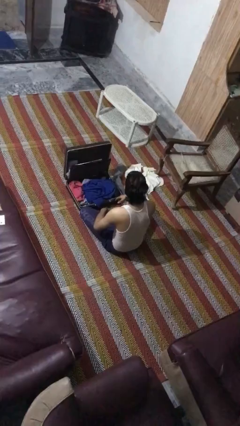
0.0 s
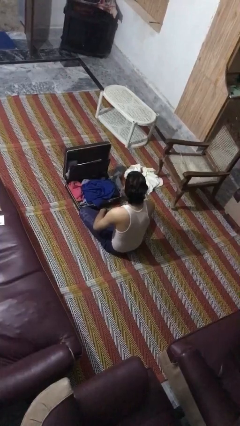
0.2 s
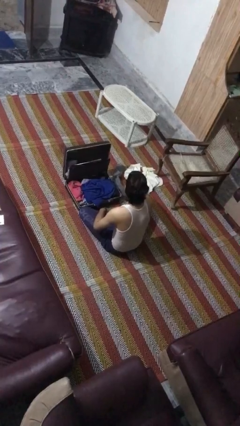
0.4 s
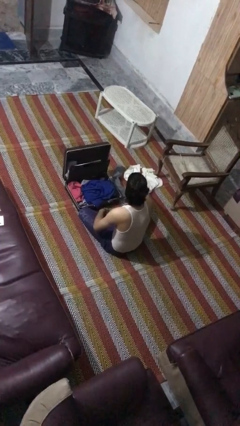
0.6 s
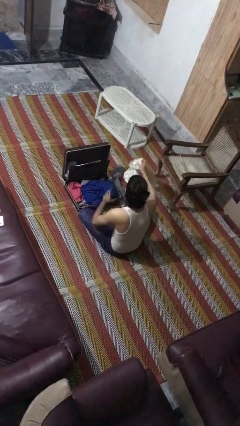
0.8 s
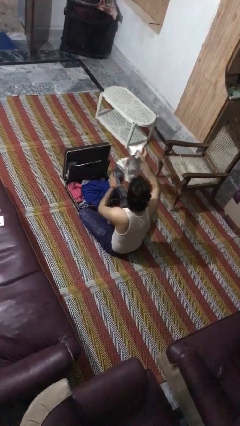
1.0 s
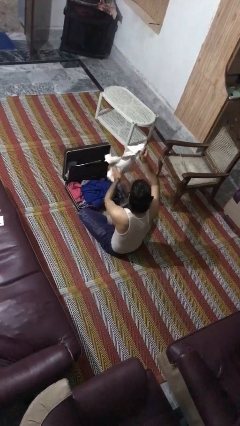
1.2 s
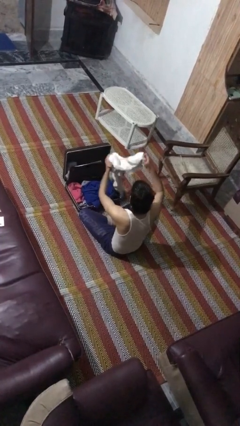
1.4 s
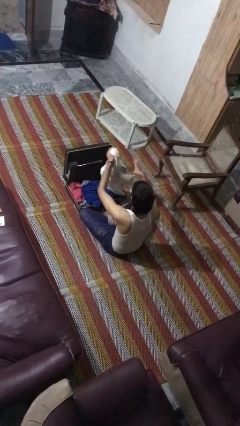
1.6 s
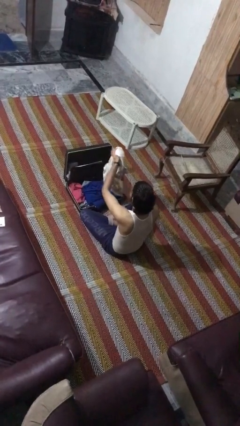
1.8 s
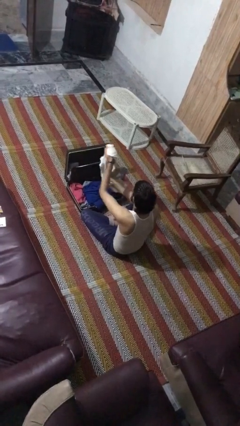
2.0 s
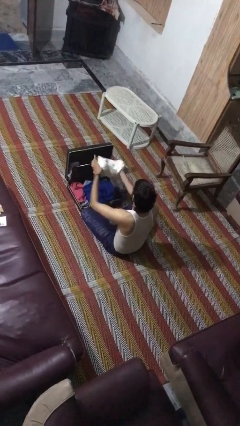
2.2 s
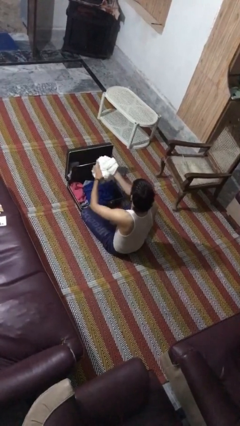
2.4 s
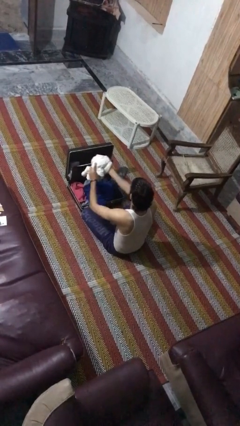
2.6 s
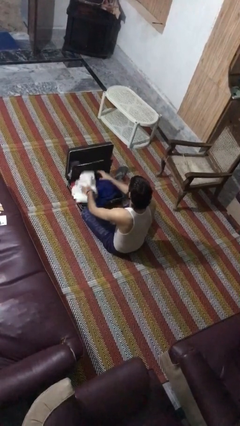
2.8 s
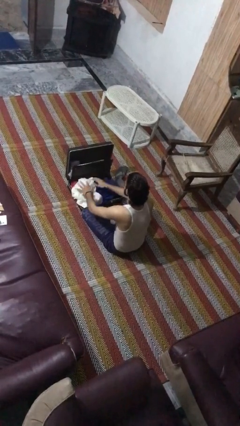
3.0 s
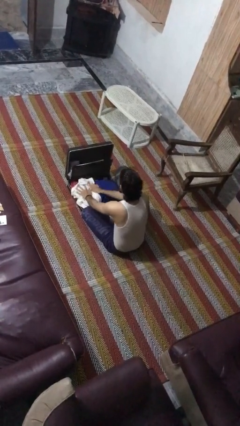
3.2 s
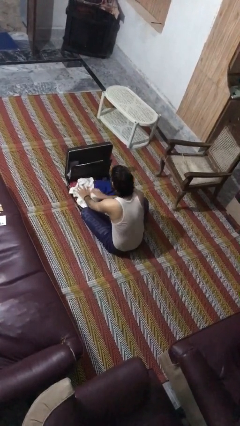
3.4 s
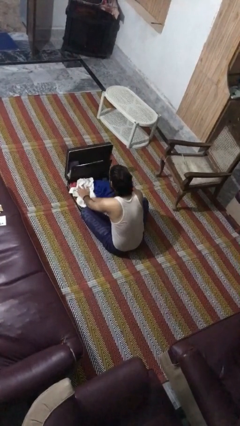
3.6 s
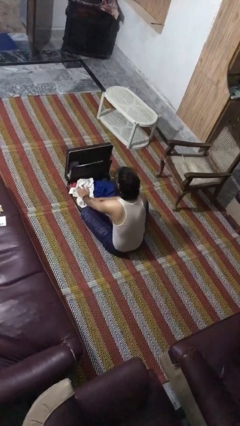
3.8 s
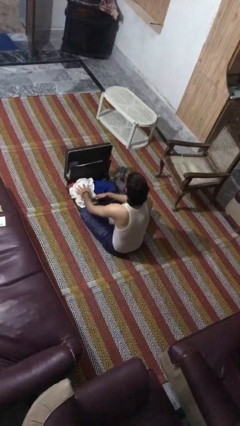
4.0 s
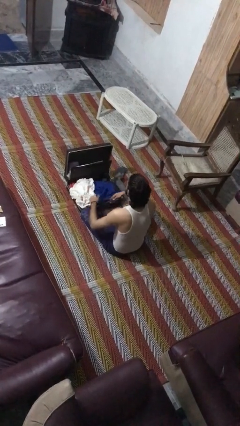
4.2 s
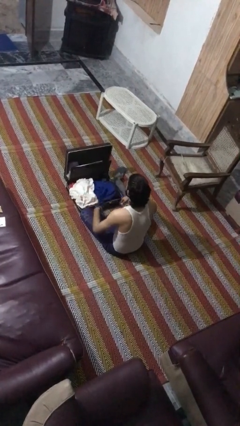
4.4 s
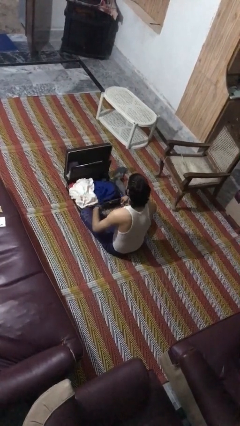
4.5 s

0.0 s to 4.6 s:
person loads clothes into suitcase

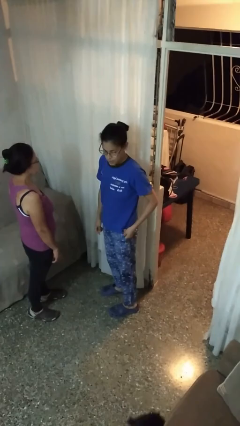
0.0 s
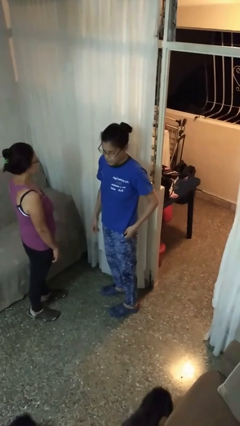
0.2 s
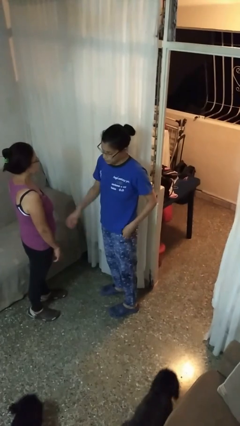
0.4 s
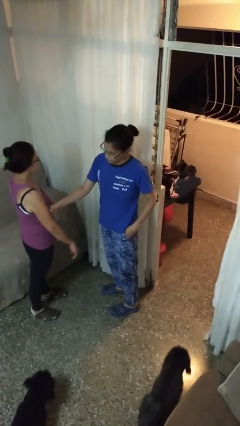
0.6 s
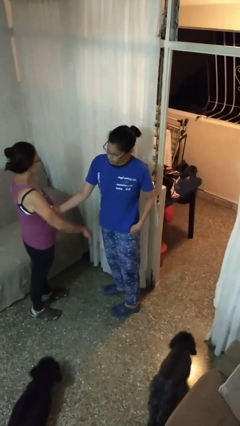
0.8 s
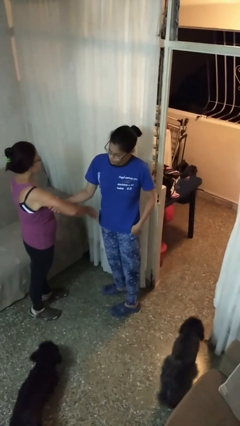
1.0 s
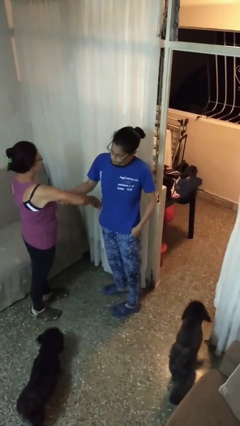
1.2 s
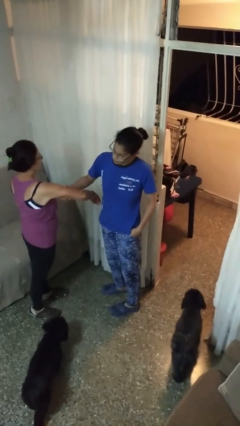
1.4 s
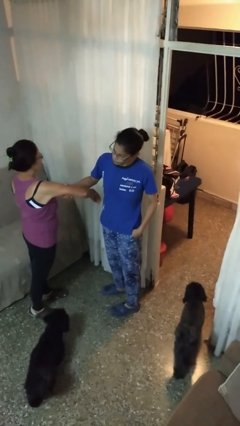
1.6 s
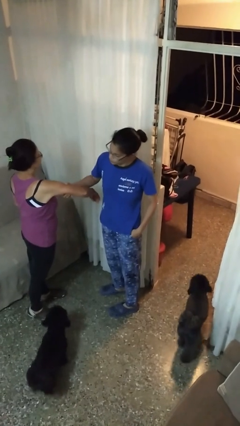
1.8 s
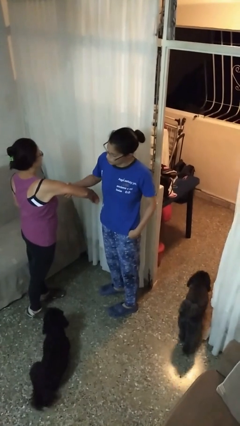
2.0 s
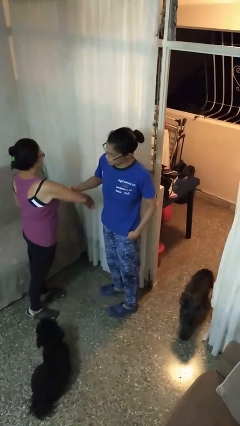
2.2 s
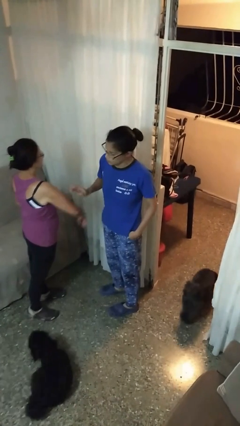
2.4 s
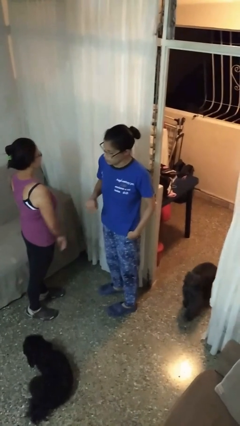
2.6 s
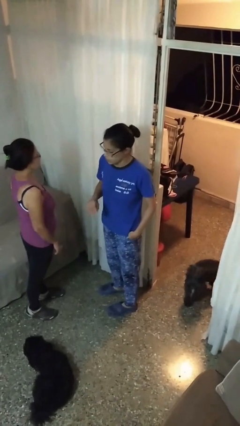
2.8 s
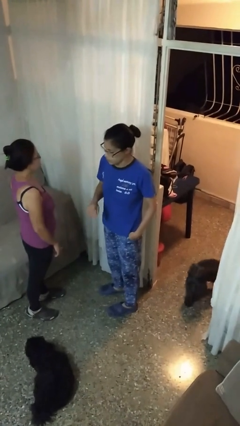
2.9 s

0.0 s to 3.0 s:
person grabs person by bicep

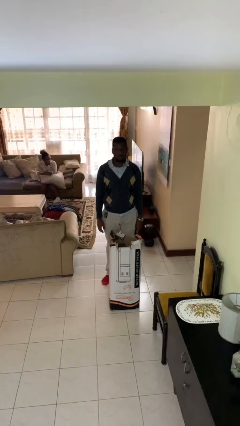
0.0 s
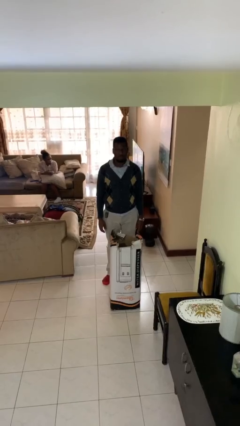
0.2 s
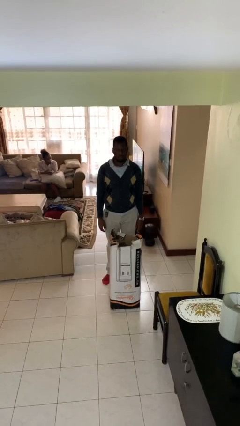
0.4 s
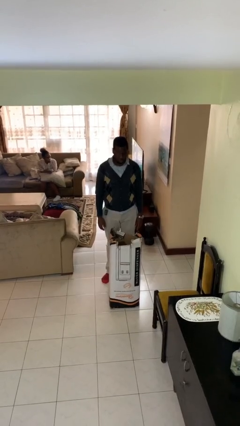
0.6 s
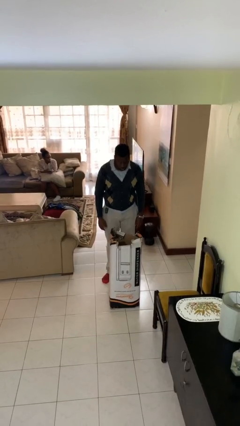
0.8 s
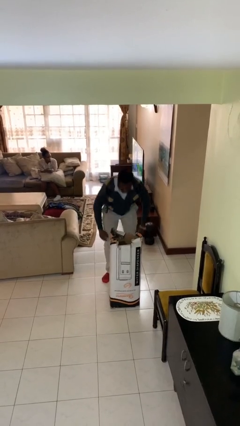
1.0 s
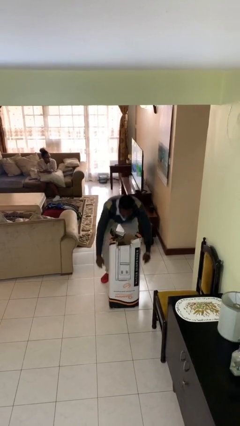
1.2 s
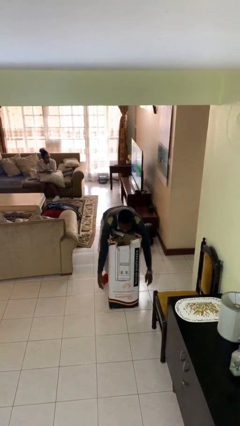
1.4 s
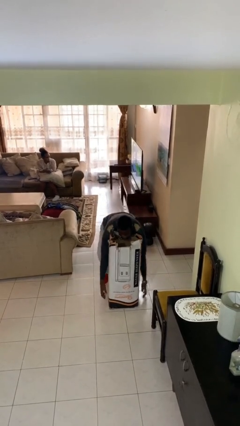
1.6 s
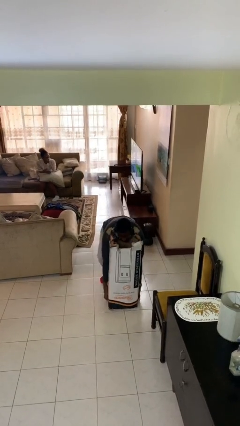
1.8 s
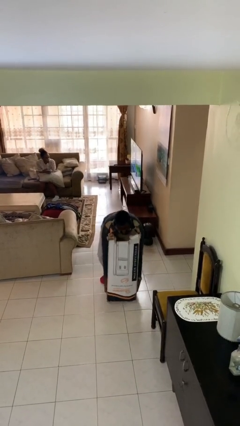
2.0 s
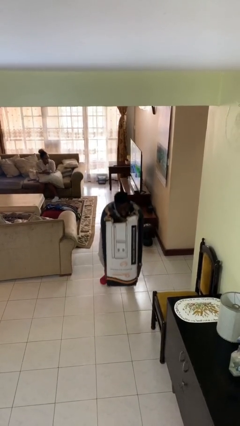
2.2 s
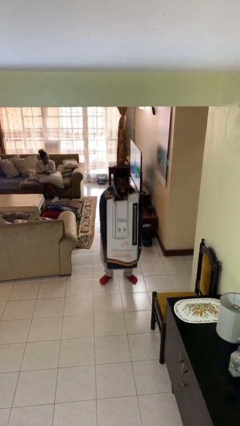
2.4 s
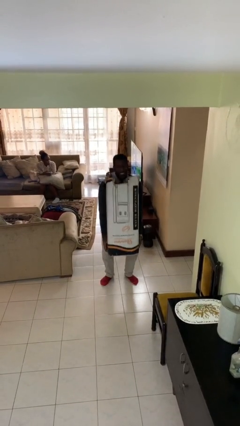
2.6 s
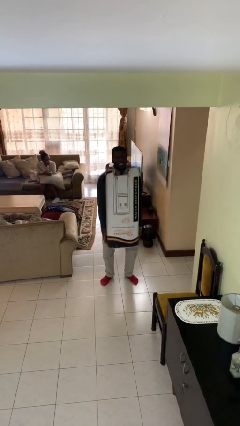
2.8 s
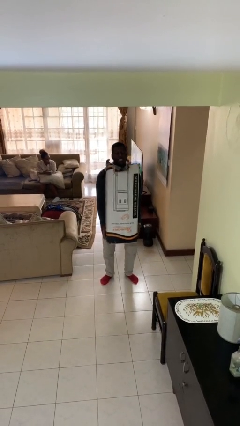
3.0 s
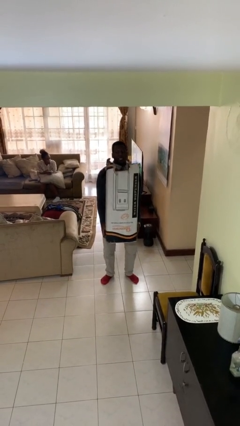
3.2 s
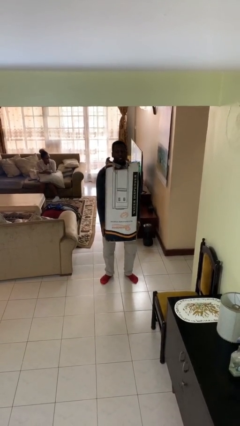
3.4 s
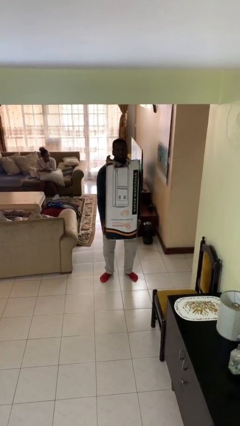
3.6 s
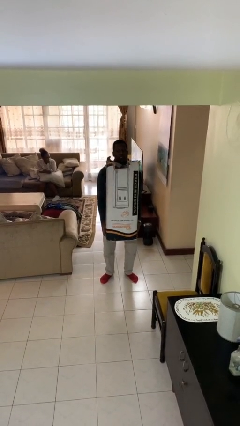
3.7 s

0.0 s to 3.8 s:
person picks up object from floor

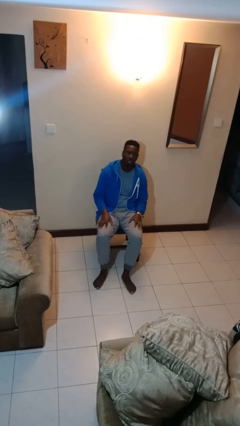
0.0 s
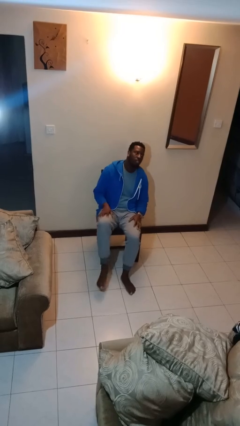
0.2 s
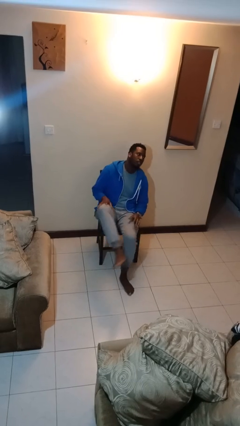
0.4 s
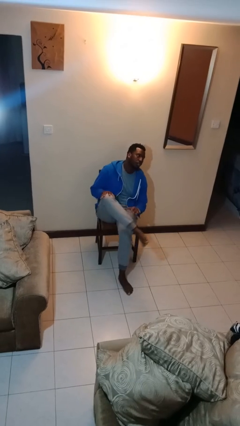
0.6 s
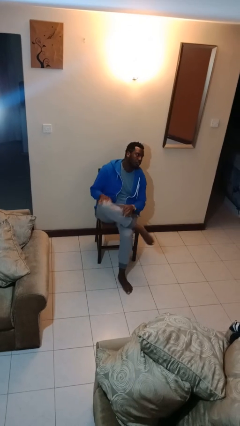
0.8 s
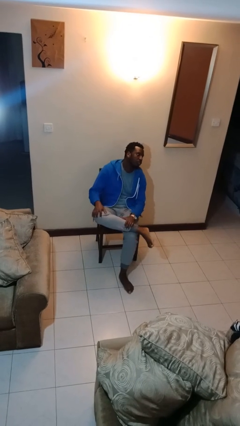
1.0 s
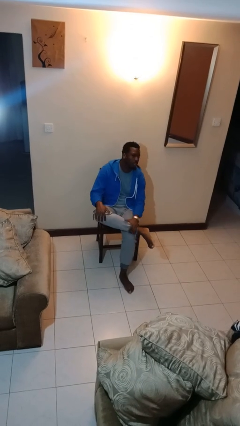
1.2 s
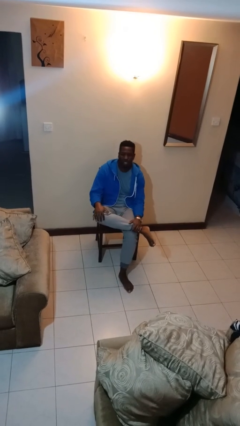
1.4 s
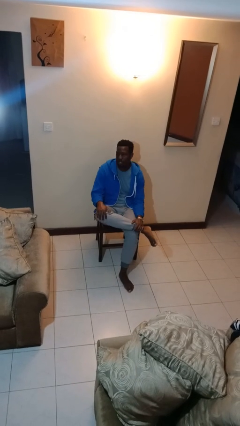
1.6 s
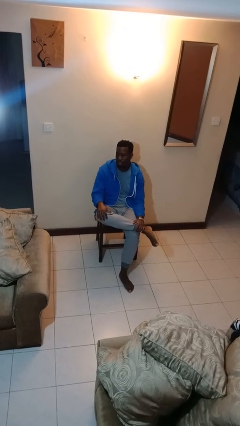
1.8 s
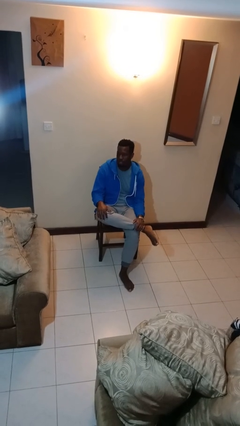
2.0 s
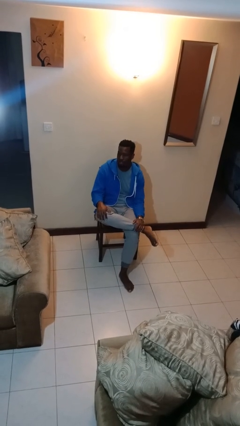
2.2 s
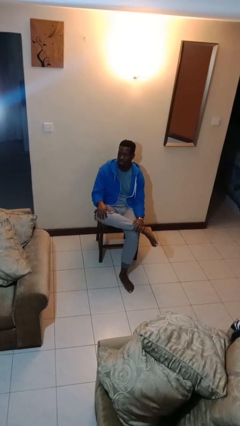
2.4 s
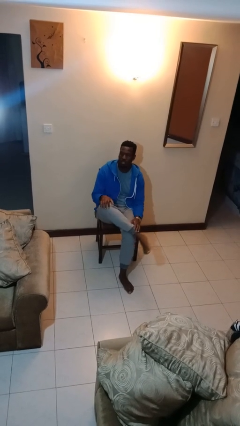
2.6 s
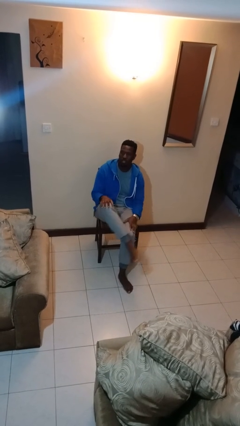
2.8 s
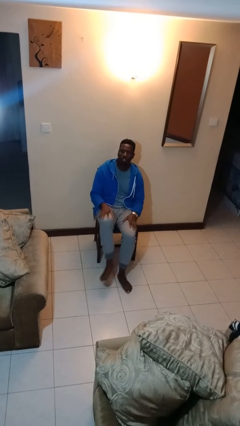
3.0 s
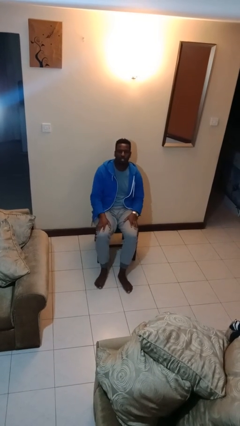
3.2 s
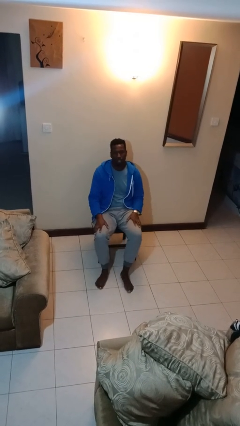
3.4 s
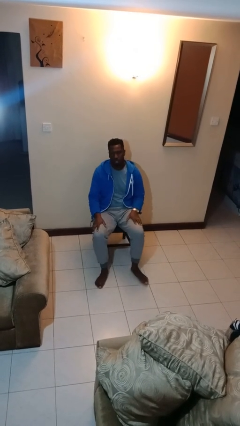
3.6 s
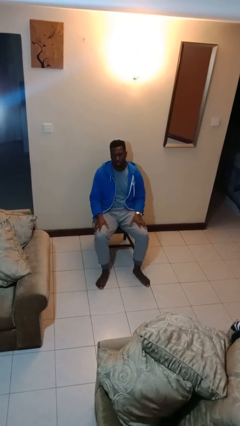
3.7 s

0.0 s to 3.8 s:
person crosses legs

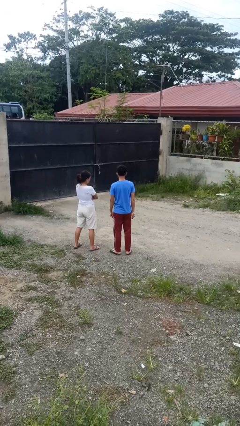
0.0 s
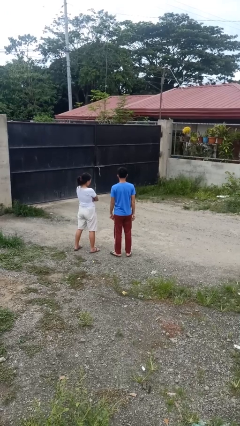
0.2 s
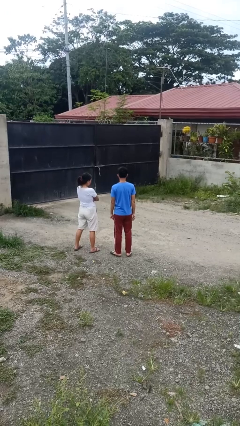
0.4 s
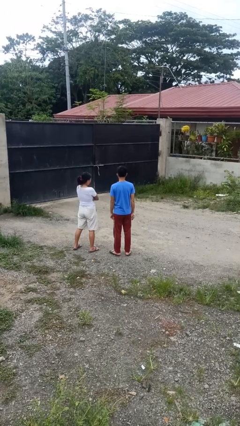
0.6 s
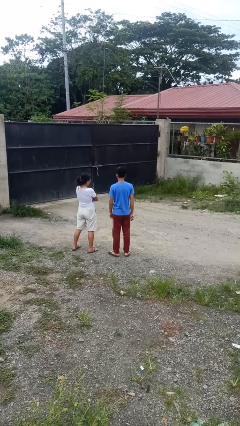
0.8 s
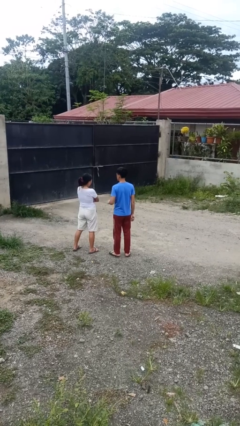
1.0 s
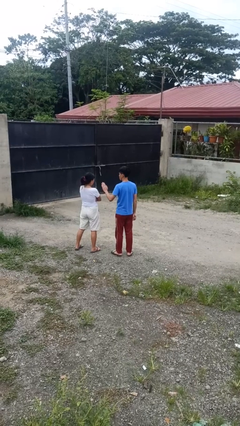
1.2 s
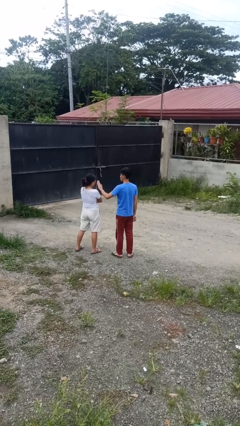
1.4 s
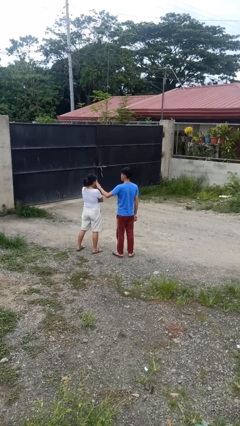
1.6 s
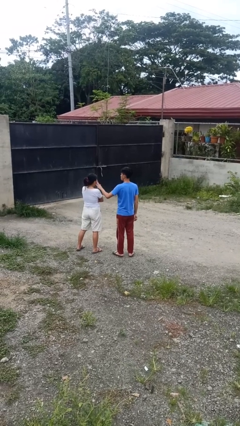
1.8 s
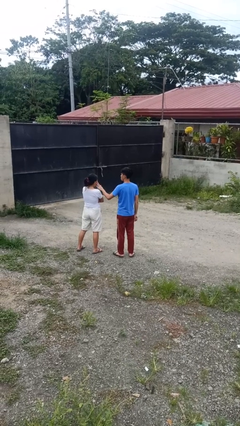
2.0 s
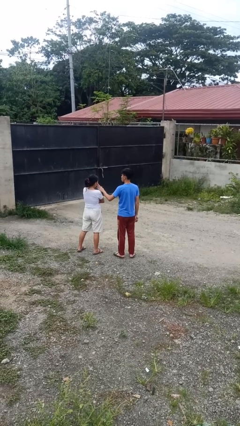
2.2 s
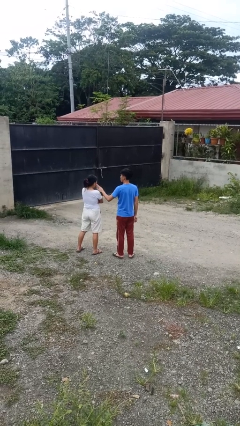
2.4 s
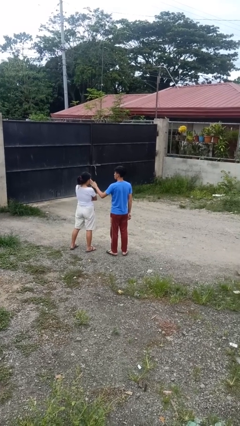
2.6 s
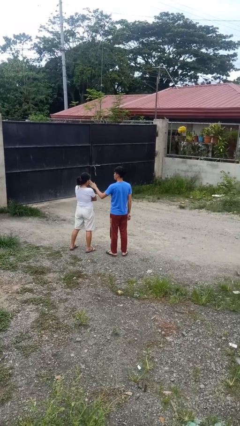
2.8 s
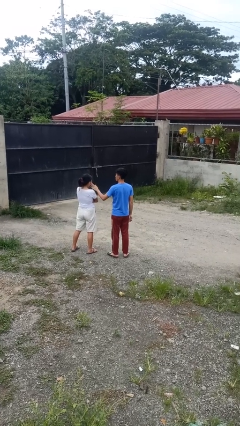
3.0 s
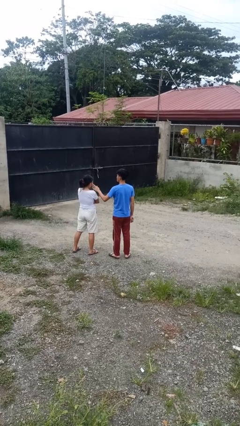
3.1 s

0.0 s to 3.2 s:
person touches face of person
